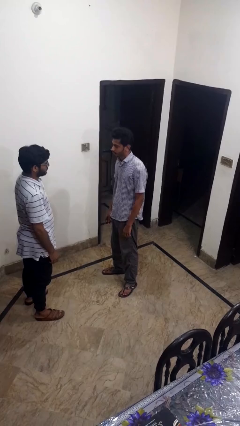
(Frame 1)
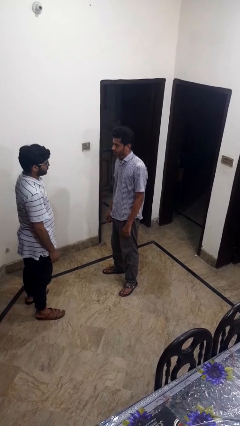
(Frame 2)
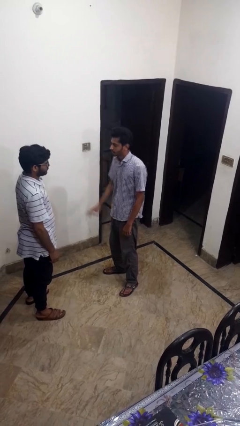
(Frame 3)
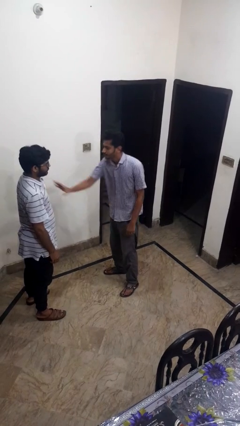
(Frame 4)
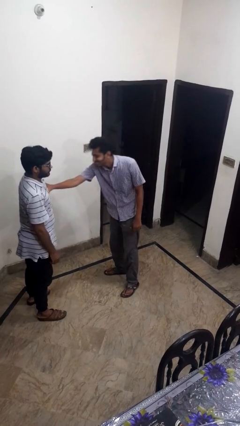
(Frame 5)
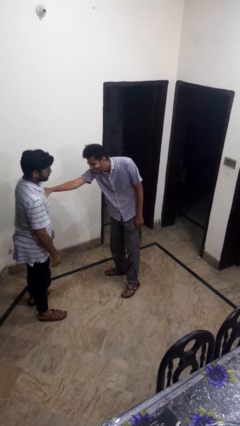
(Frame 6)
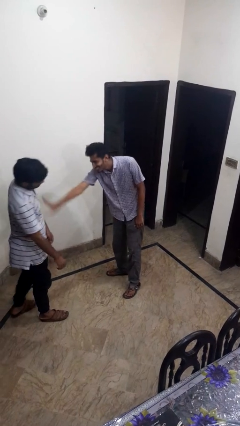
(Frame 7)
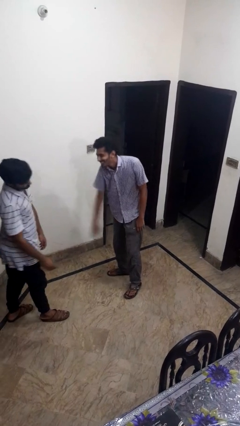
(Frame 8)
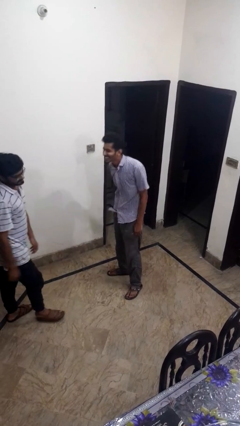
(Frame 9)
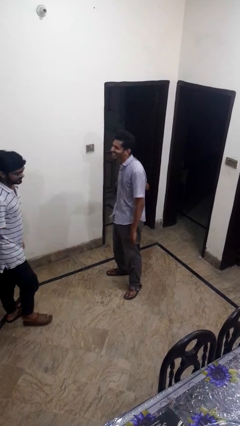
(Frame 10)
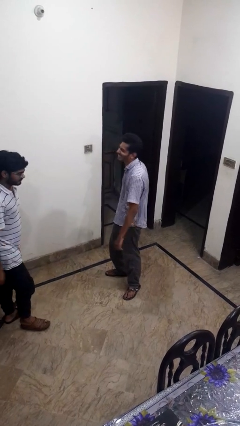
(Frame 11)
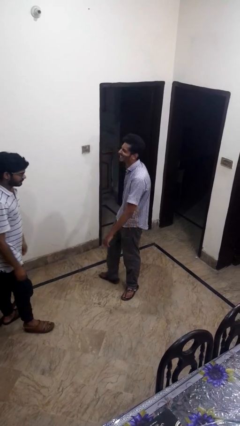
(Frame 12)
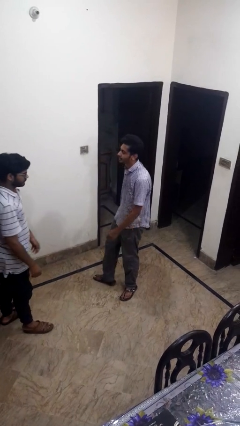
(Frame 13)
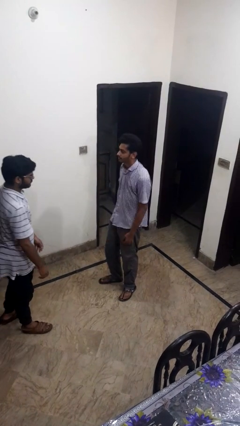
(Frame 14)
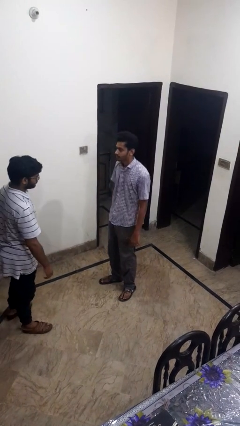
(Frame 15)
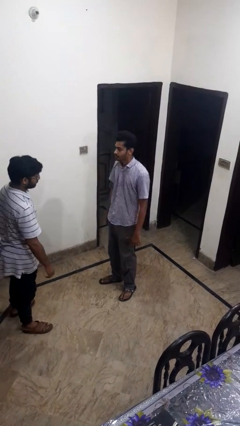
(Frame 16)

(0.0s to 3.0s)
person shoves person

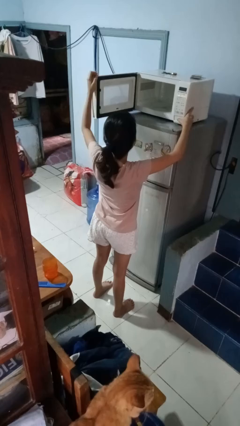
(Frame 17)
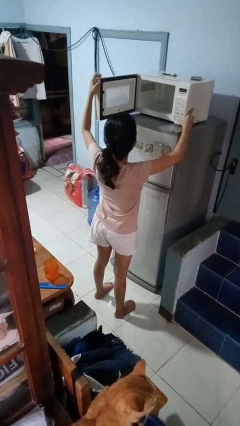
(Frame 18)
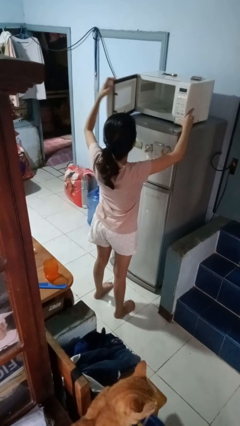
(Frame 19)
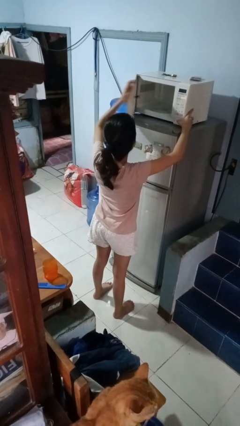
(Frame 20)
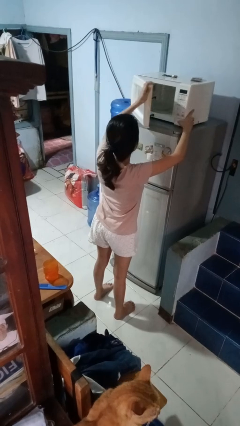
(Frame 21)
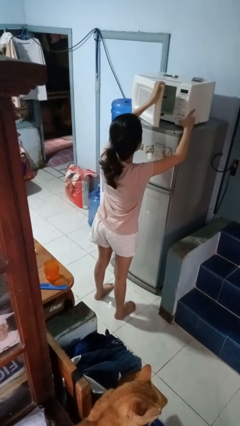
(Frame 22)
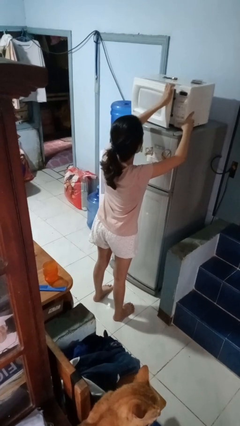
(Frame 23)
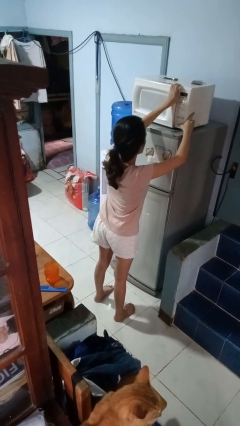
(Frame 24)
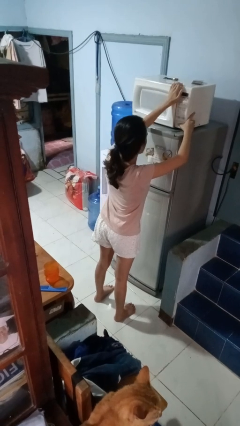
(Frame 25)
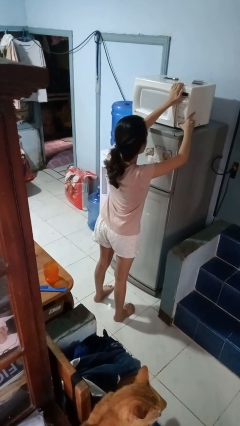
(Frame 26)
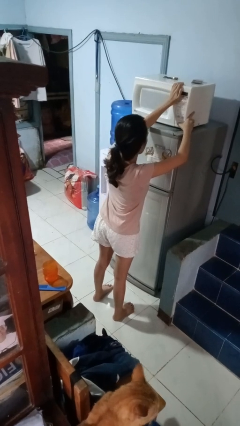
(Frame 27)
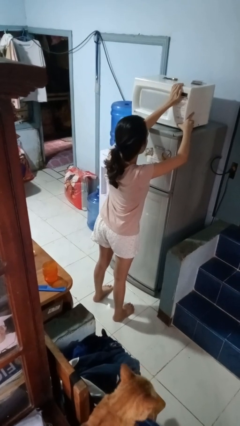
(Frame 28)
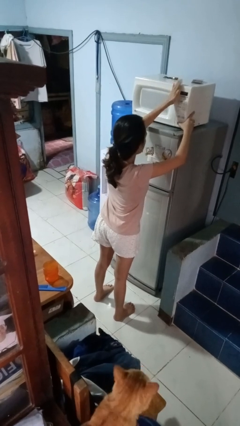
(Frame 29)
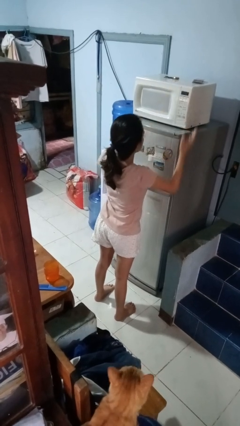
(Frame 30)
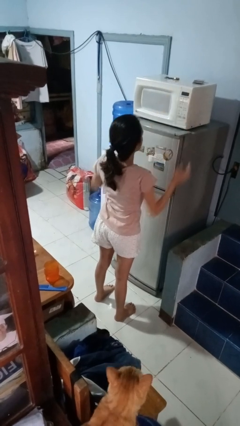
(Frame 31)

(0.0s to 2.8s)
person closes microwave

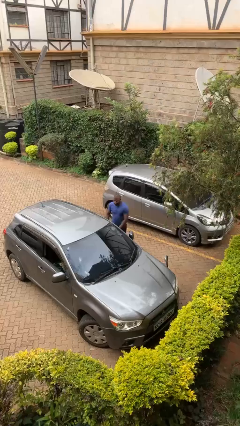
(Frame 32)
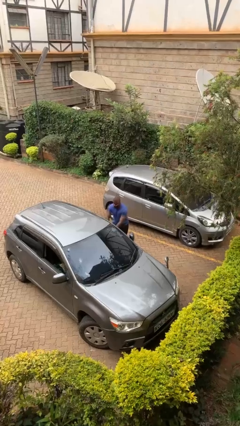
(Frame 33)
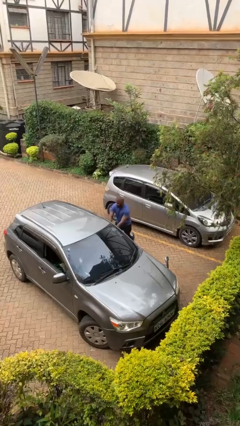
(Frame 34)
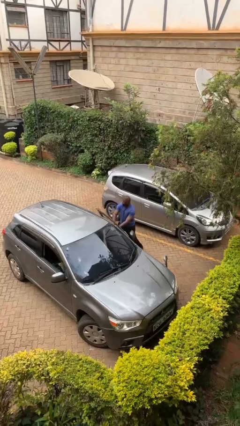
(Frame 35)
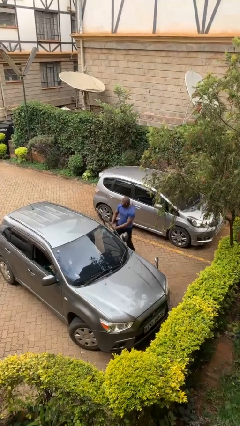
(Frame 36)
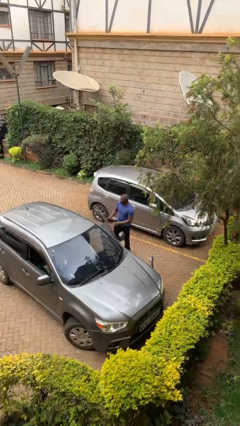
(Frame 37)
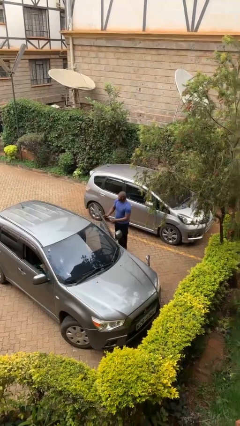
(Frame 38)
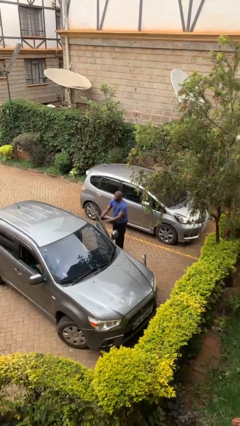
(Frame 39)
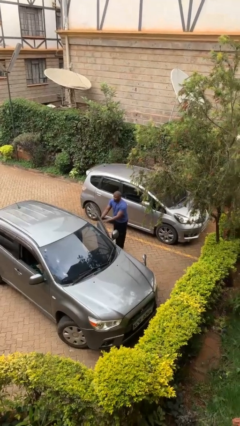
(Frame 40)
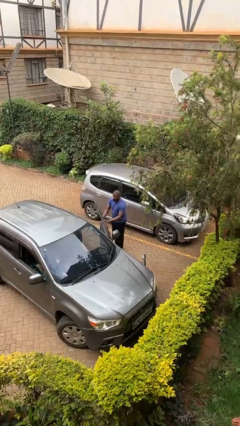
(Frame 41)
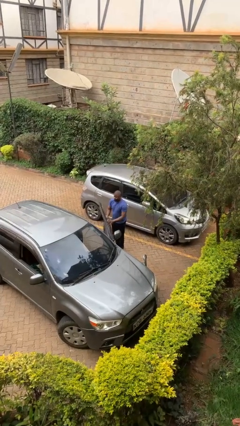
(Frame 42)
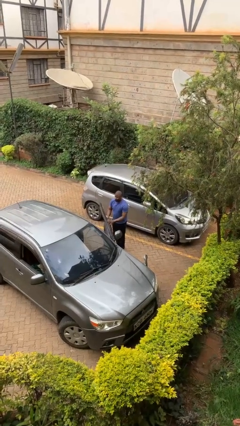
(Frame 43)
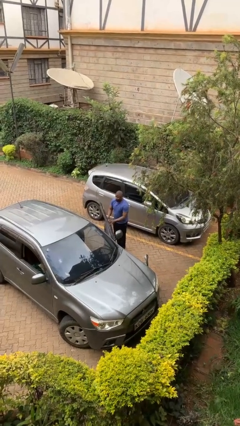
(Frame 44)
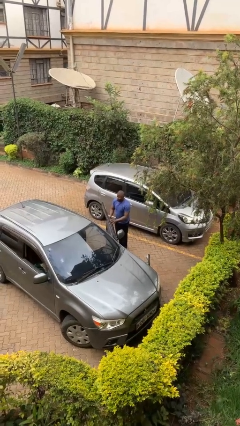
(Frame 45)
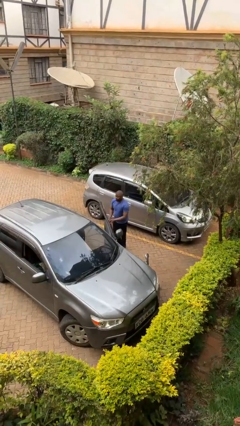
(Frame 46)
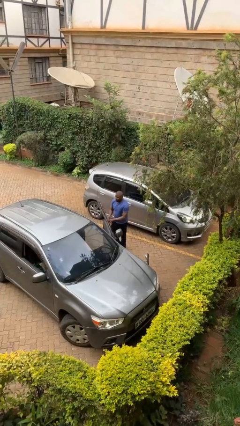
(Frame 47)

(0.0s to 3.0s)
person opens car door

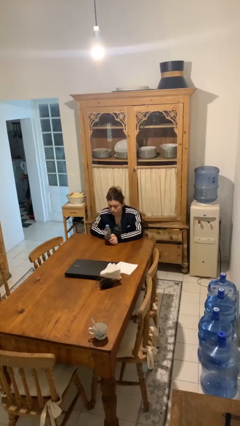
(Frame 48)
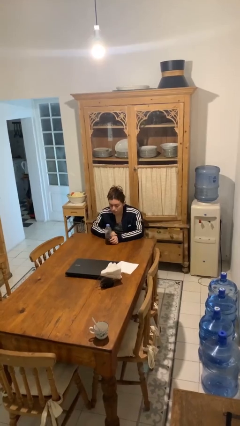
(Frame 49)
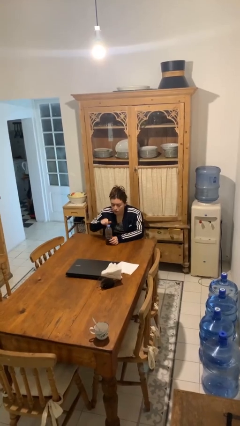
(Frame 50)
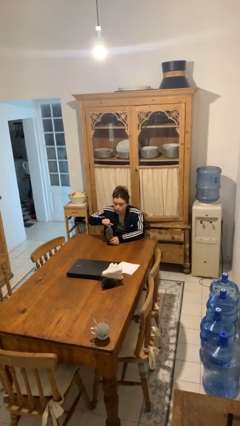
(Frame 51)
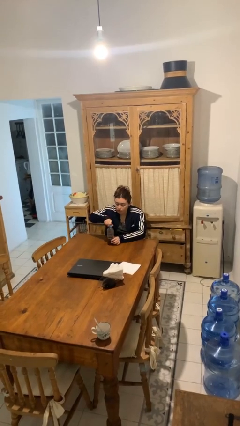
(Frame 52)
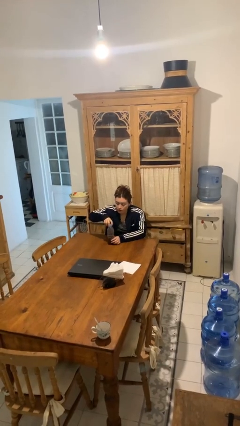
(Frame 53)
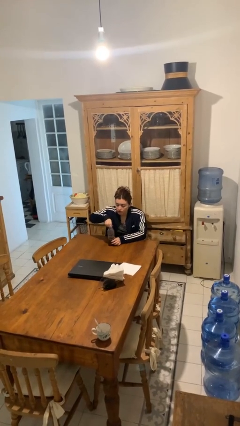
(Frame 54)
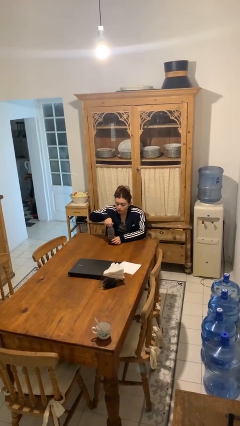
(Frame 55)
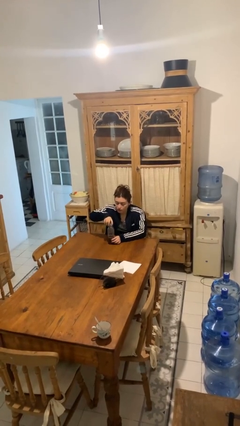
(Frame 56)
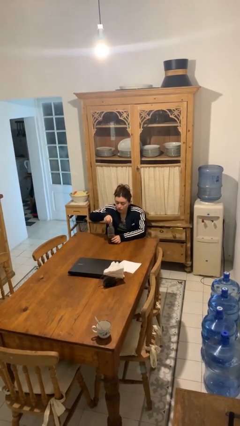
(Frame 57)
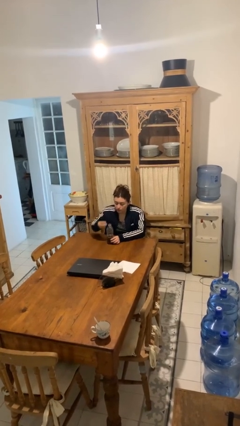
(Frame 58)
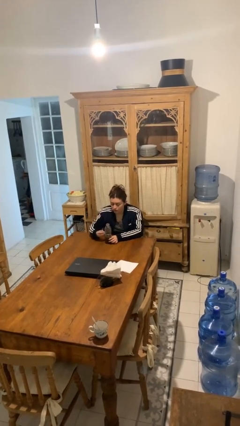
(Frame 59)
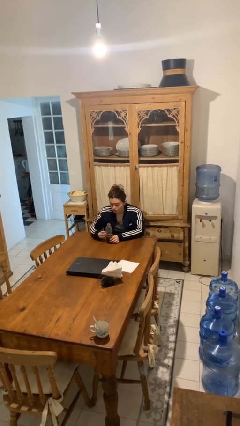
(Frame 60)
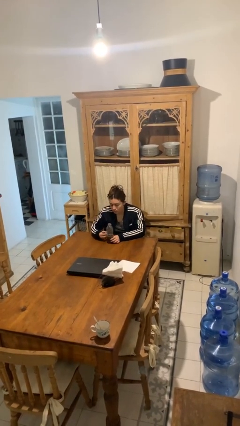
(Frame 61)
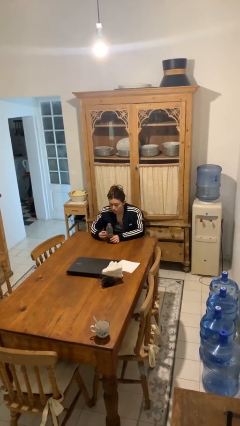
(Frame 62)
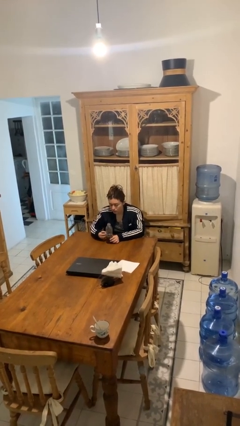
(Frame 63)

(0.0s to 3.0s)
person unscrews lid from bottle

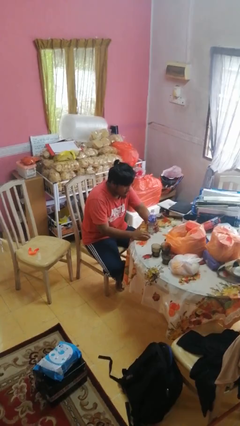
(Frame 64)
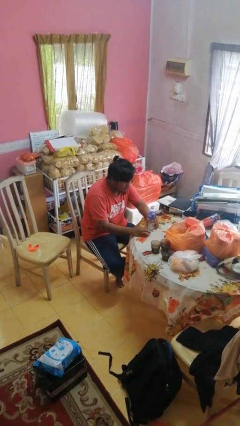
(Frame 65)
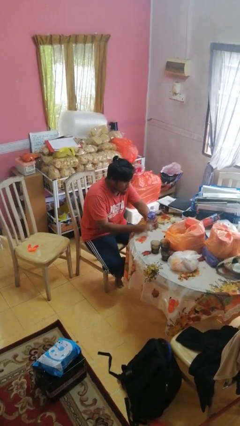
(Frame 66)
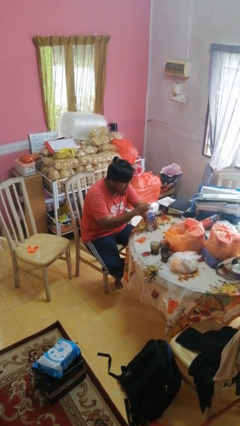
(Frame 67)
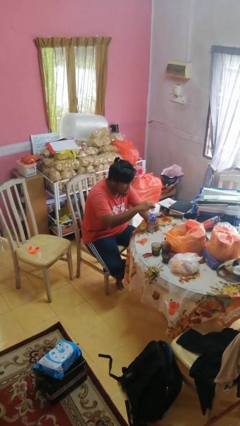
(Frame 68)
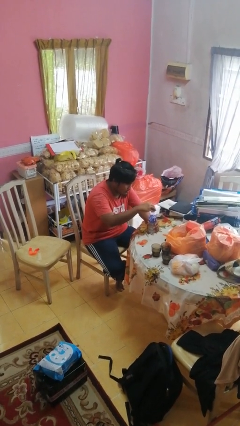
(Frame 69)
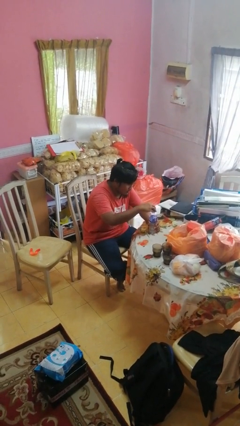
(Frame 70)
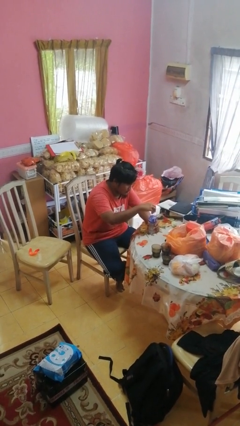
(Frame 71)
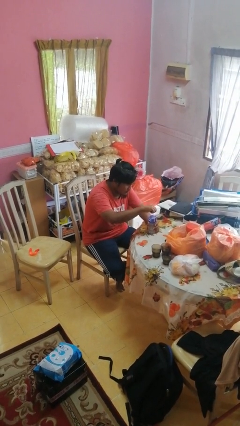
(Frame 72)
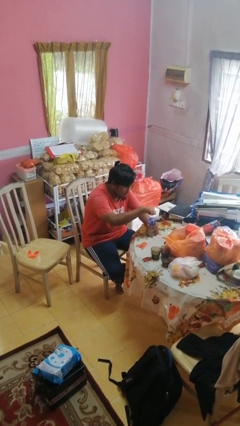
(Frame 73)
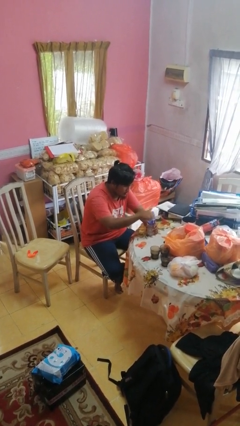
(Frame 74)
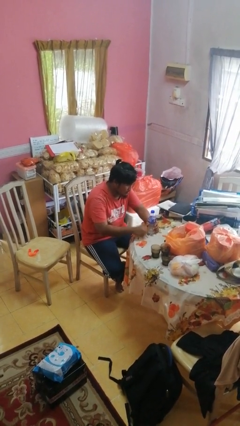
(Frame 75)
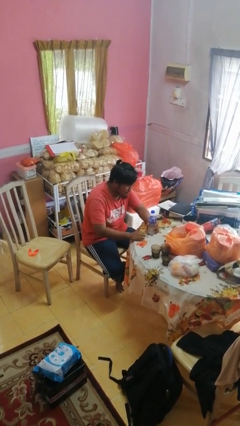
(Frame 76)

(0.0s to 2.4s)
person screws lid to bottle

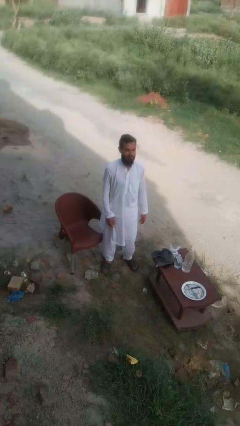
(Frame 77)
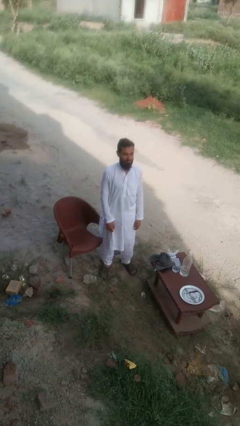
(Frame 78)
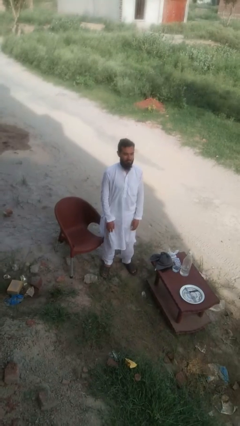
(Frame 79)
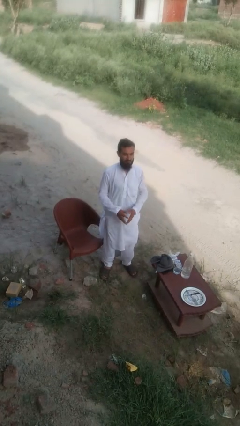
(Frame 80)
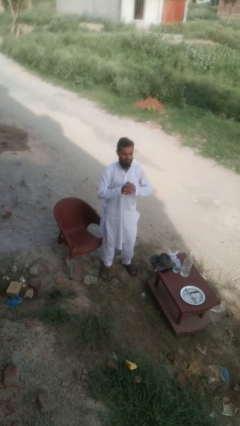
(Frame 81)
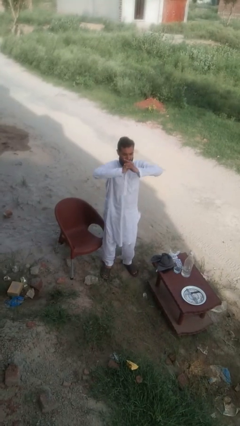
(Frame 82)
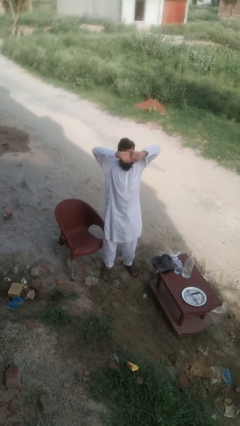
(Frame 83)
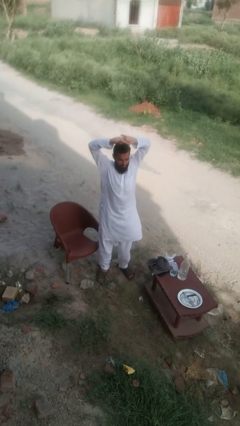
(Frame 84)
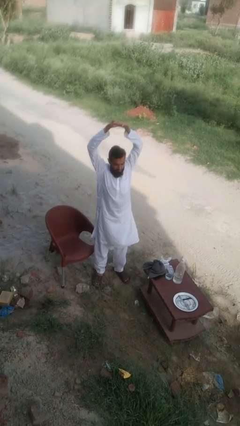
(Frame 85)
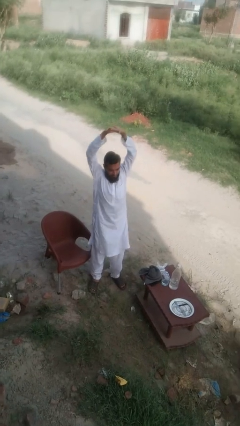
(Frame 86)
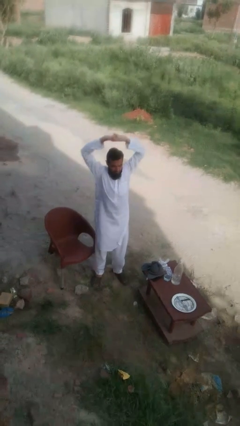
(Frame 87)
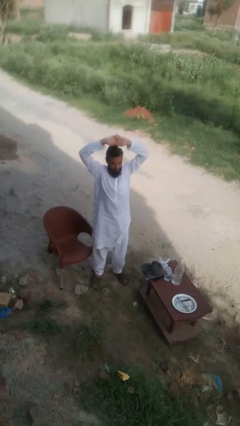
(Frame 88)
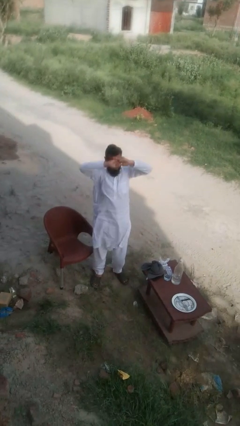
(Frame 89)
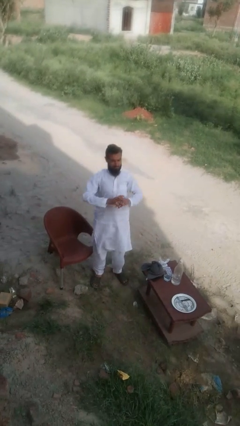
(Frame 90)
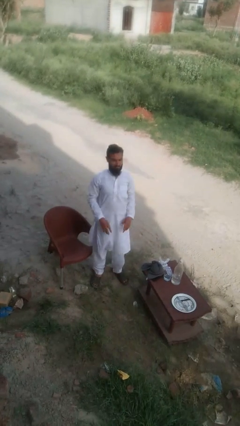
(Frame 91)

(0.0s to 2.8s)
person stretches arms over head

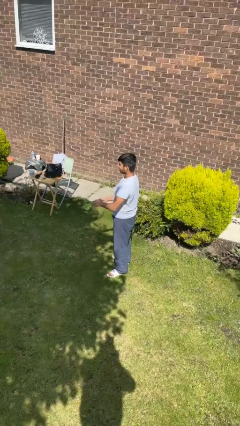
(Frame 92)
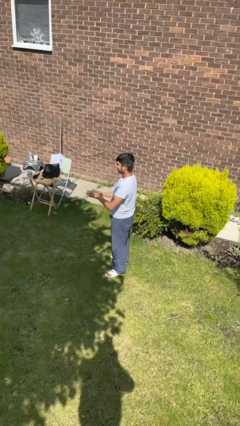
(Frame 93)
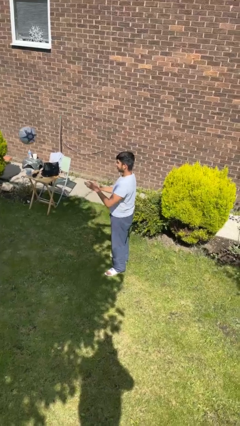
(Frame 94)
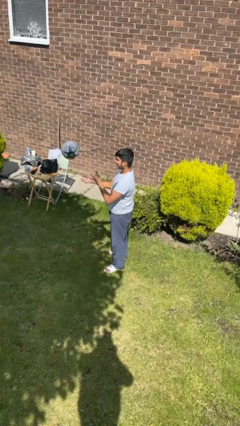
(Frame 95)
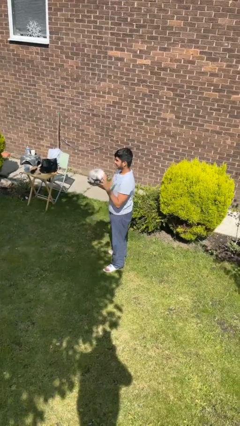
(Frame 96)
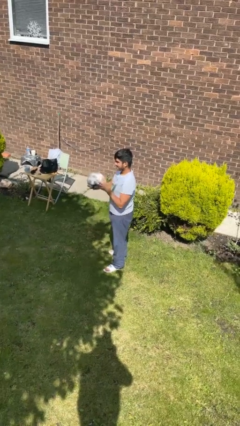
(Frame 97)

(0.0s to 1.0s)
person catches object from person
